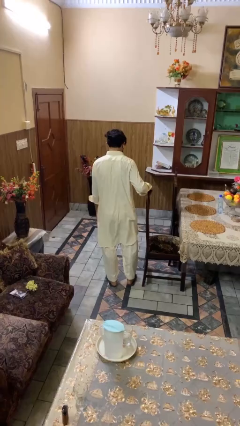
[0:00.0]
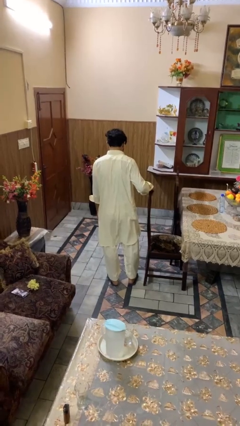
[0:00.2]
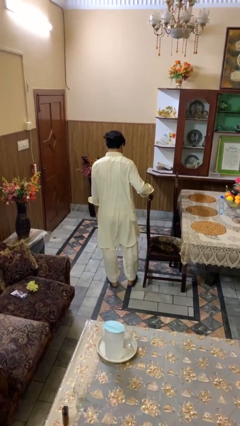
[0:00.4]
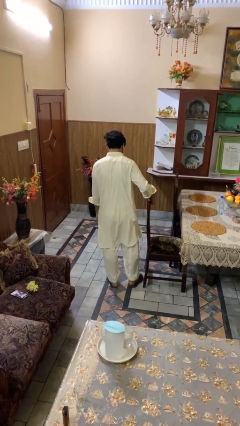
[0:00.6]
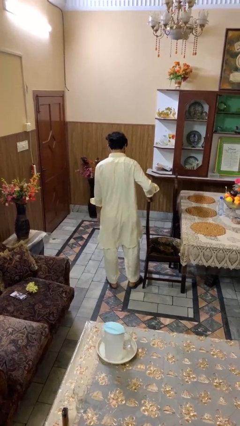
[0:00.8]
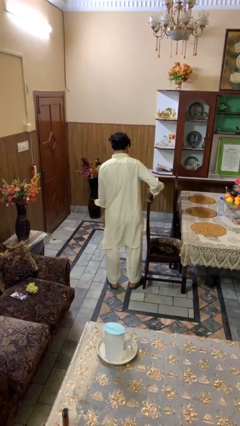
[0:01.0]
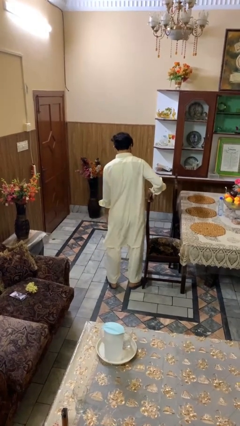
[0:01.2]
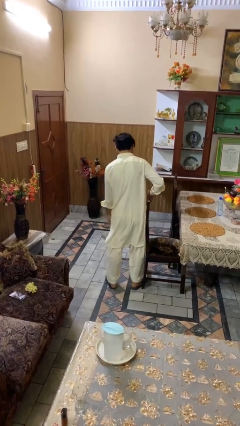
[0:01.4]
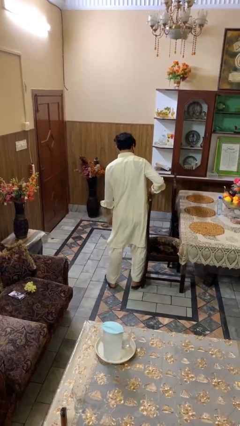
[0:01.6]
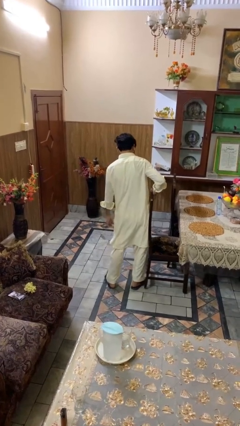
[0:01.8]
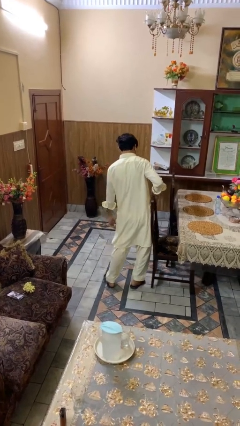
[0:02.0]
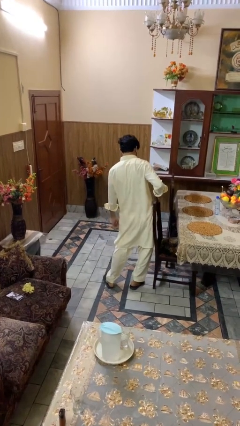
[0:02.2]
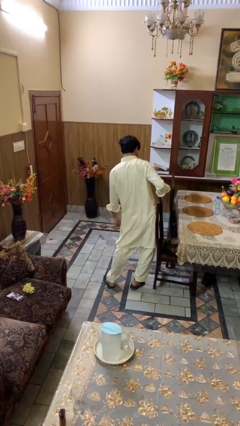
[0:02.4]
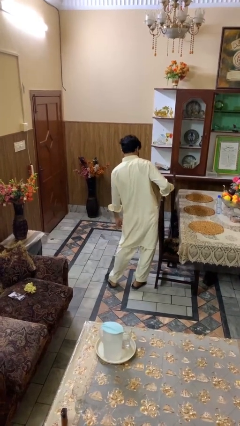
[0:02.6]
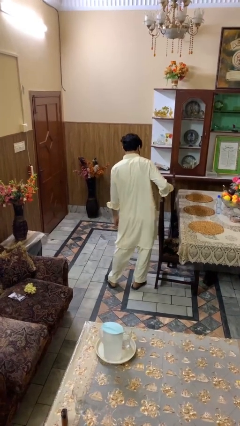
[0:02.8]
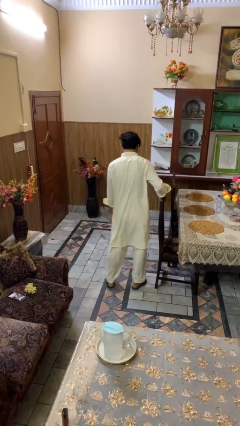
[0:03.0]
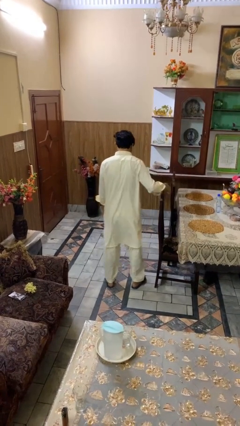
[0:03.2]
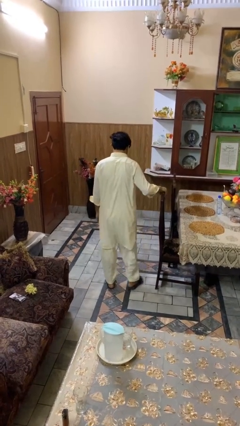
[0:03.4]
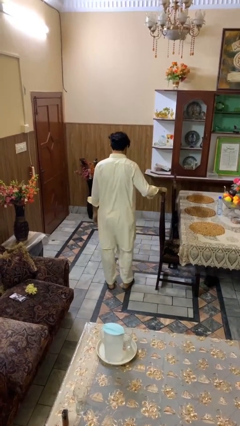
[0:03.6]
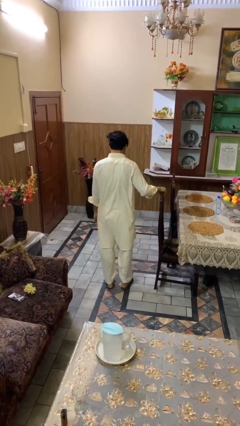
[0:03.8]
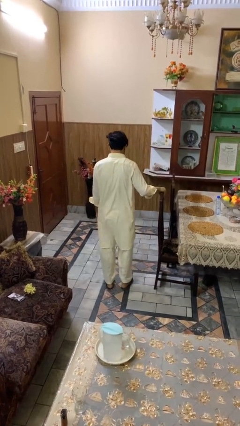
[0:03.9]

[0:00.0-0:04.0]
person pushes in chair

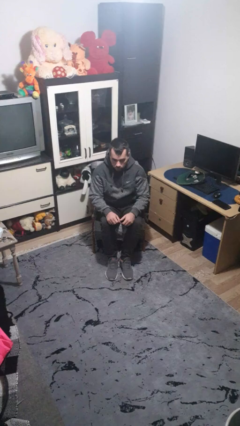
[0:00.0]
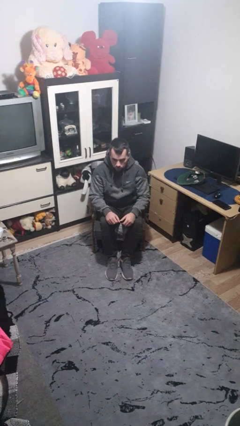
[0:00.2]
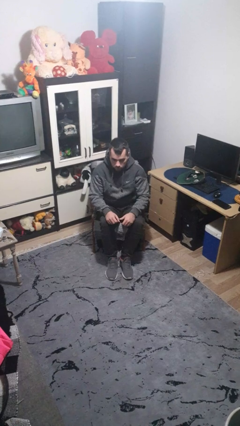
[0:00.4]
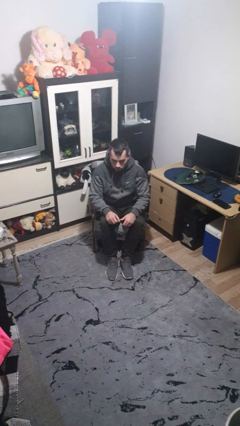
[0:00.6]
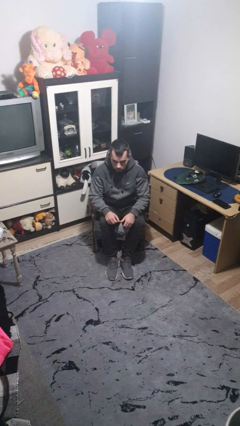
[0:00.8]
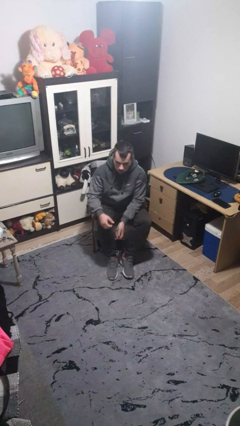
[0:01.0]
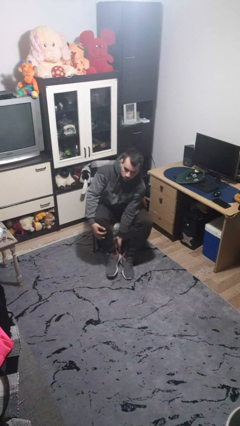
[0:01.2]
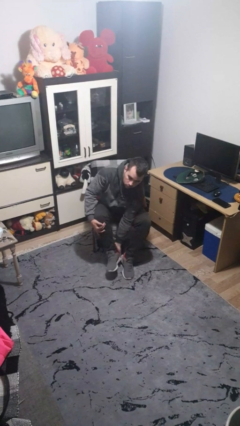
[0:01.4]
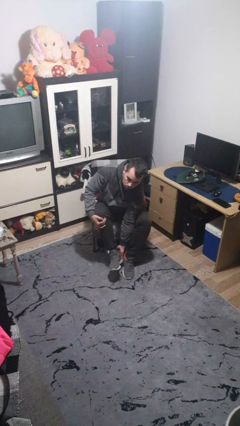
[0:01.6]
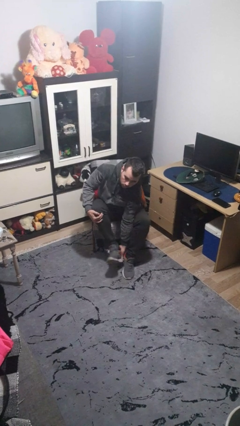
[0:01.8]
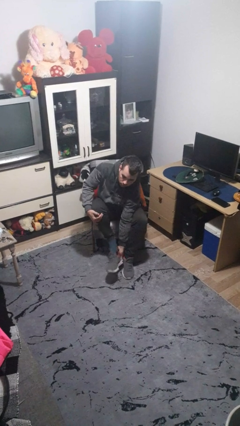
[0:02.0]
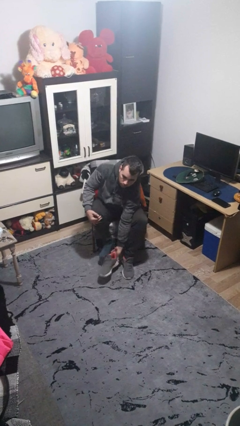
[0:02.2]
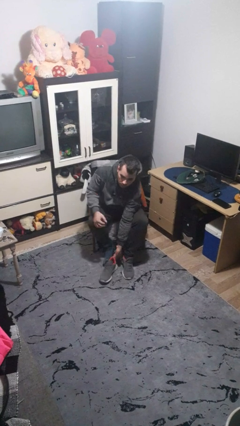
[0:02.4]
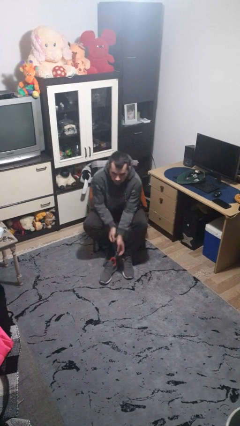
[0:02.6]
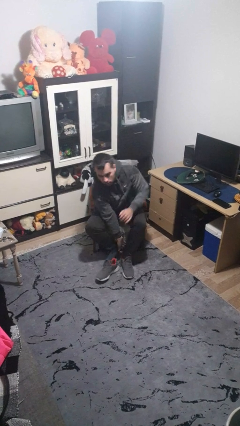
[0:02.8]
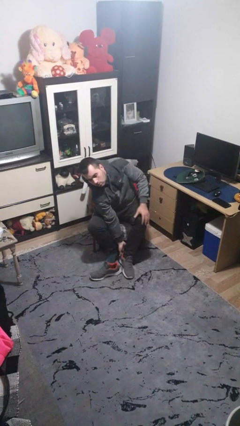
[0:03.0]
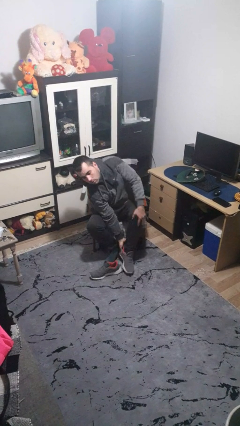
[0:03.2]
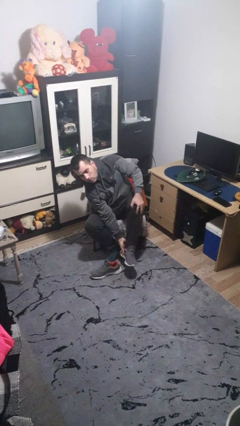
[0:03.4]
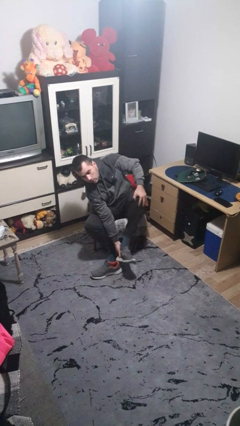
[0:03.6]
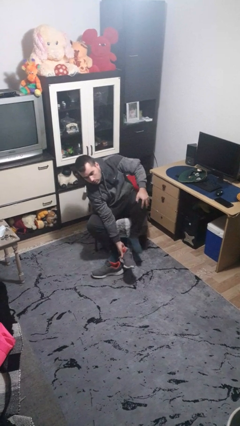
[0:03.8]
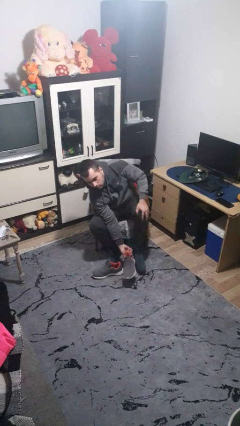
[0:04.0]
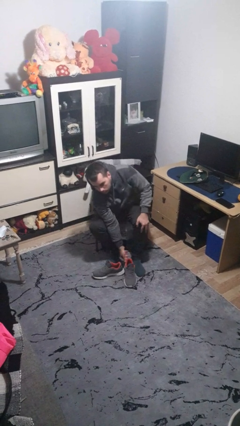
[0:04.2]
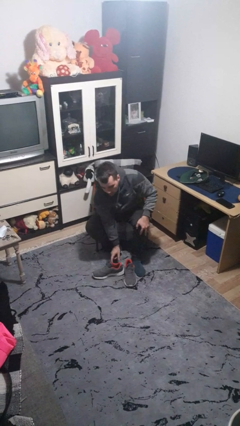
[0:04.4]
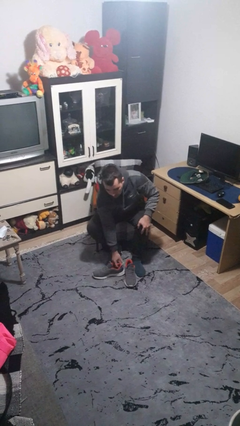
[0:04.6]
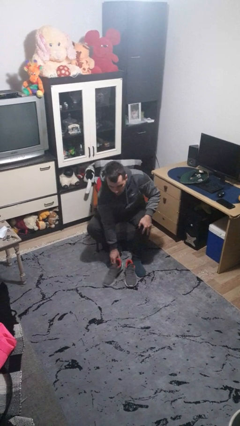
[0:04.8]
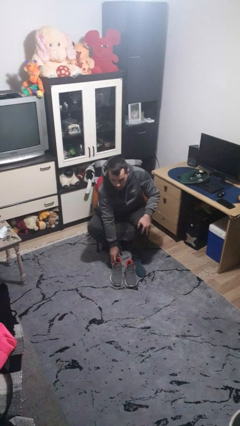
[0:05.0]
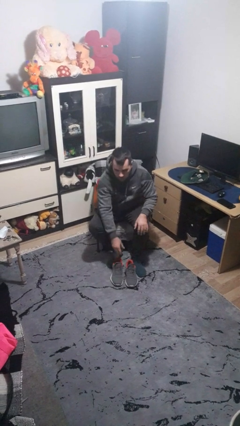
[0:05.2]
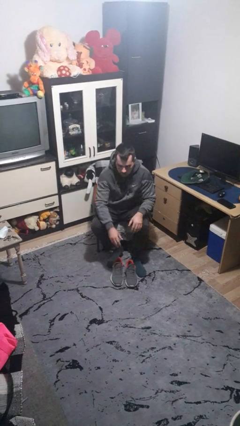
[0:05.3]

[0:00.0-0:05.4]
person takes off shoes

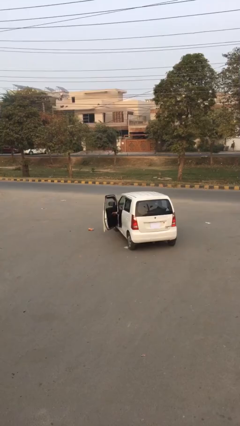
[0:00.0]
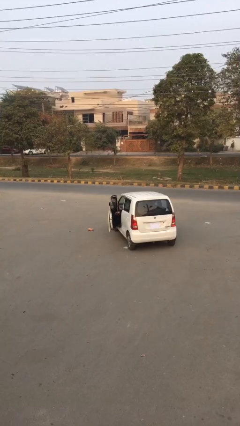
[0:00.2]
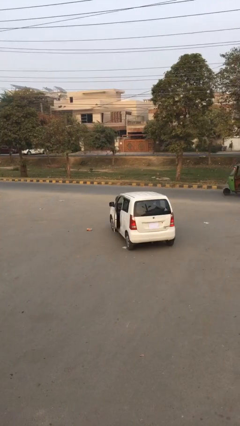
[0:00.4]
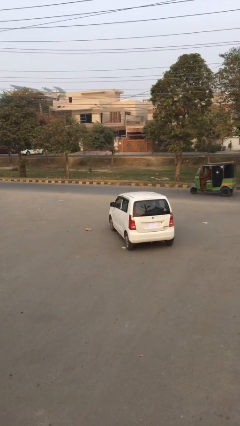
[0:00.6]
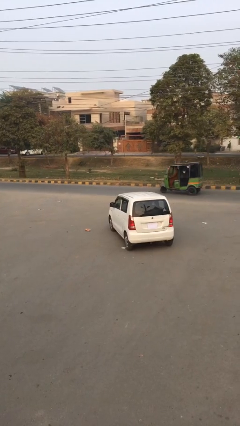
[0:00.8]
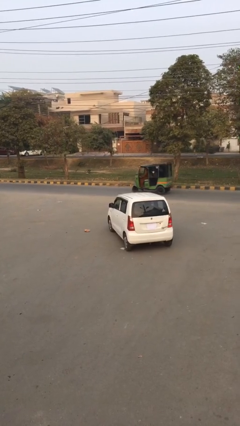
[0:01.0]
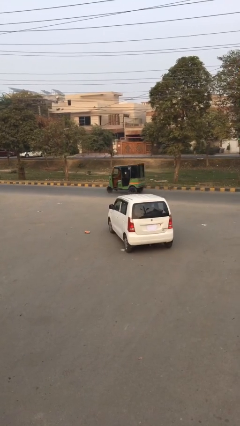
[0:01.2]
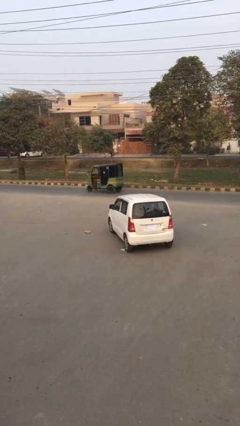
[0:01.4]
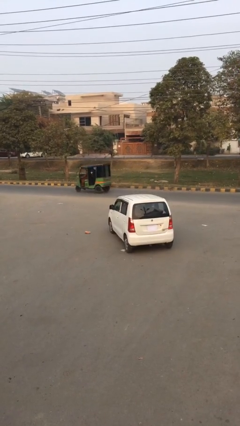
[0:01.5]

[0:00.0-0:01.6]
person closes car door

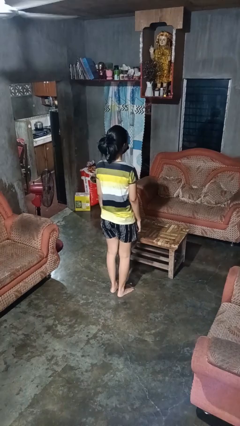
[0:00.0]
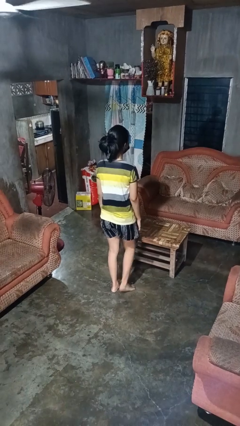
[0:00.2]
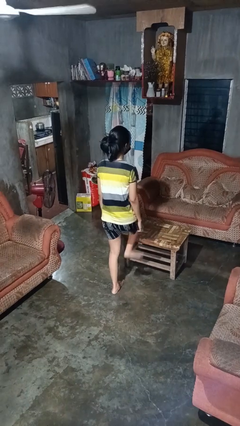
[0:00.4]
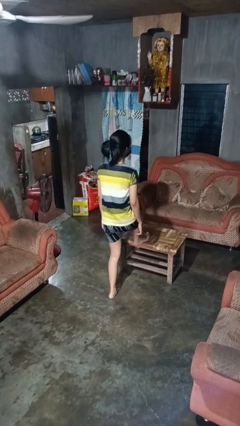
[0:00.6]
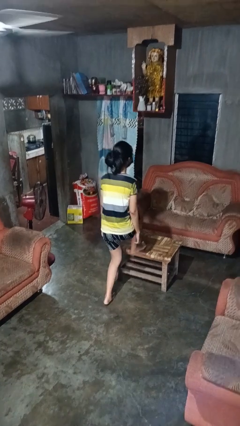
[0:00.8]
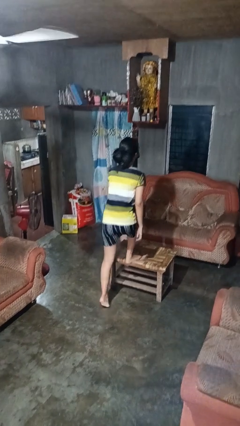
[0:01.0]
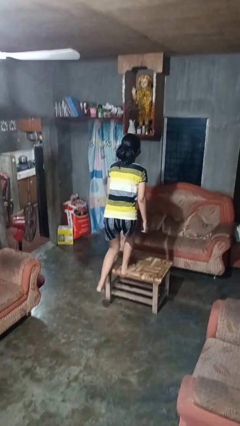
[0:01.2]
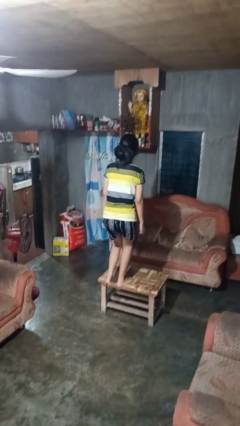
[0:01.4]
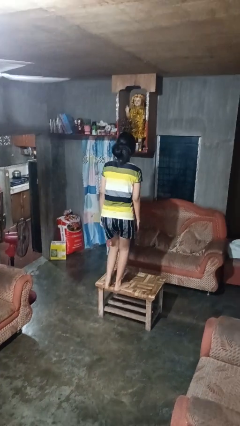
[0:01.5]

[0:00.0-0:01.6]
person climbs on table

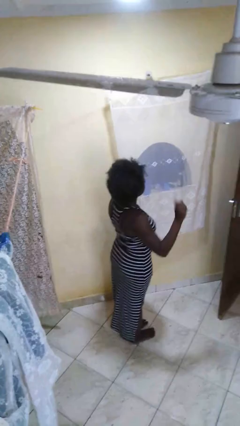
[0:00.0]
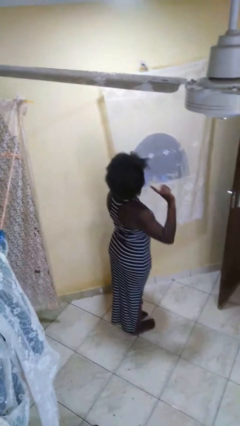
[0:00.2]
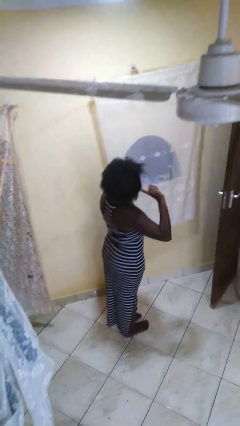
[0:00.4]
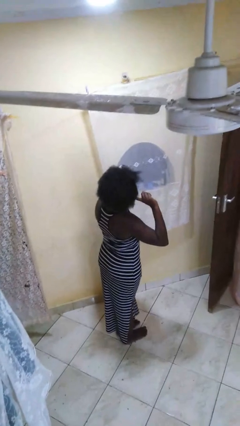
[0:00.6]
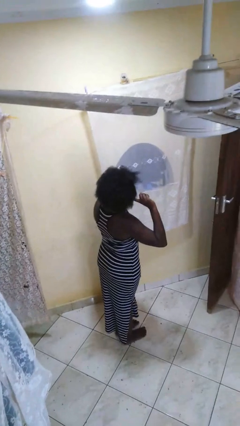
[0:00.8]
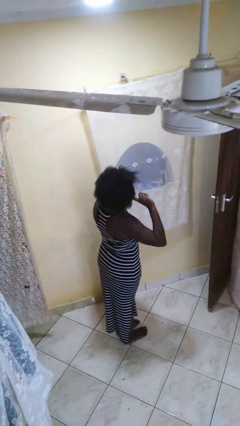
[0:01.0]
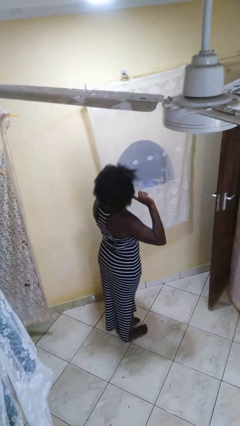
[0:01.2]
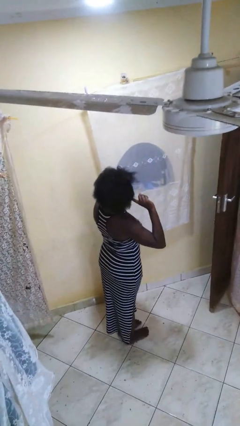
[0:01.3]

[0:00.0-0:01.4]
person gestures listen closely

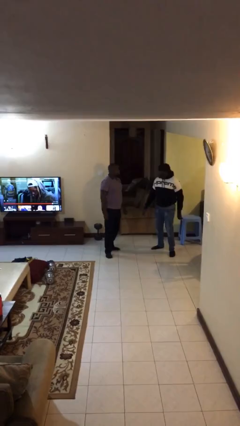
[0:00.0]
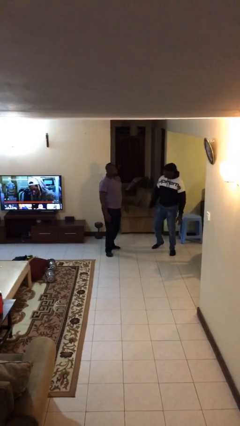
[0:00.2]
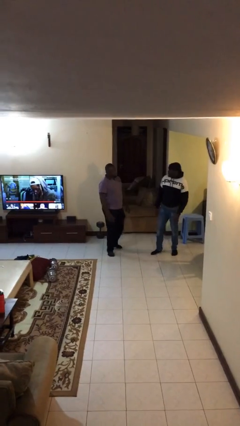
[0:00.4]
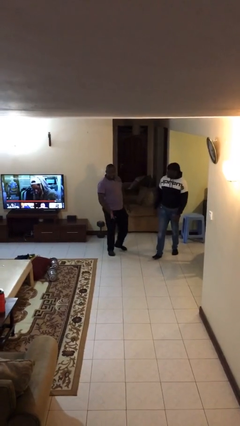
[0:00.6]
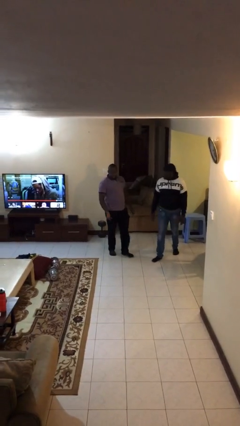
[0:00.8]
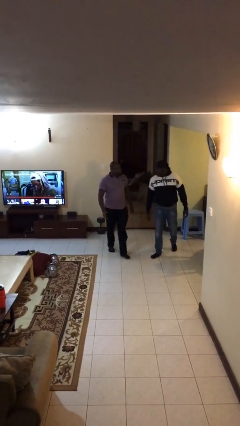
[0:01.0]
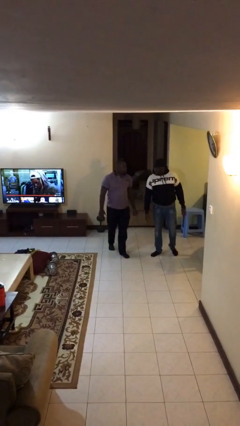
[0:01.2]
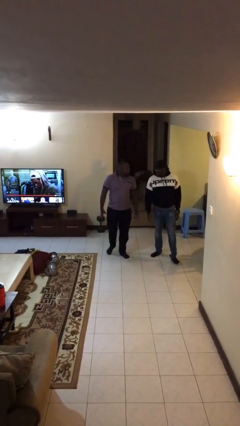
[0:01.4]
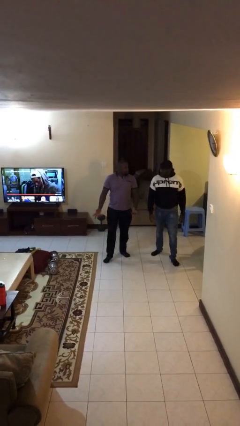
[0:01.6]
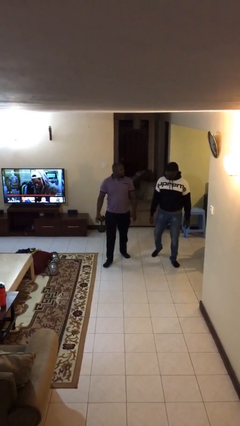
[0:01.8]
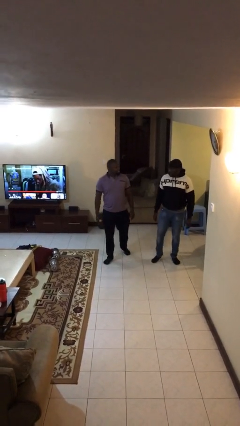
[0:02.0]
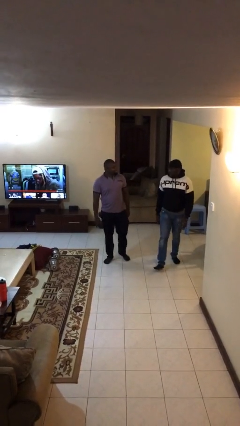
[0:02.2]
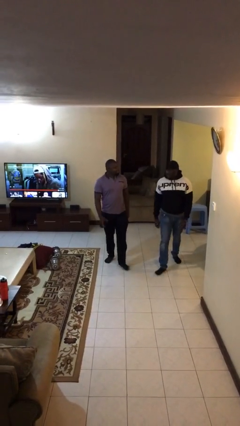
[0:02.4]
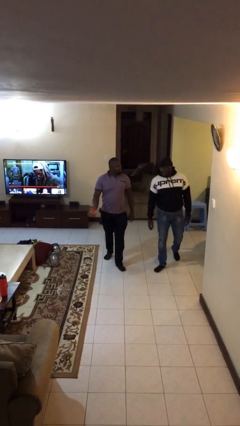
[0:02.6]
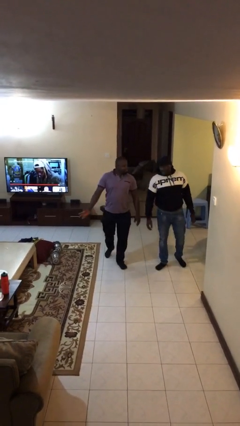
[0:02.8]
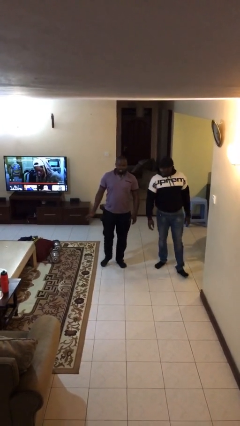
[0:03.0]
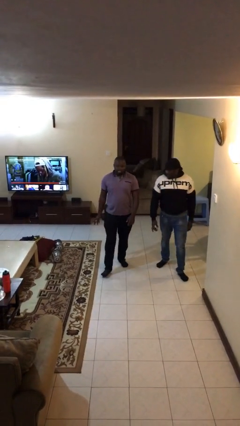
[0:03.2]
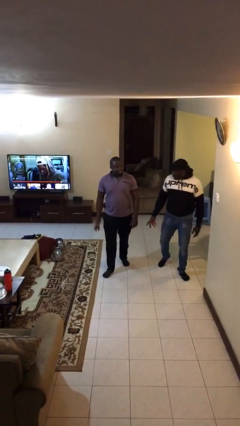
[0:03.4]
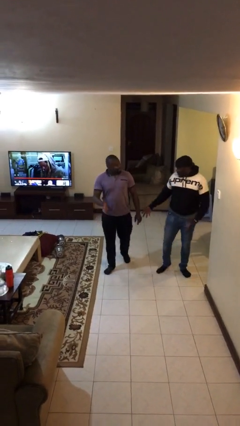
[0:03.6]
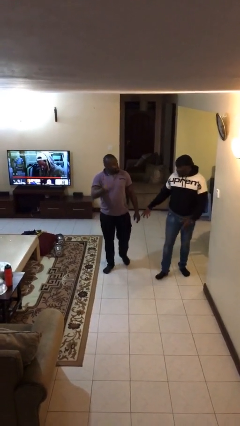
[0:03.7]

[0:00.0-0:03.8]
person talks to person
